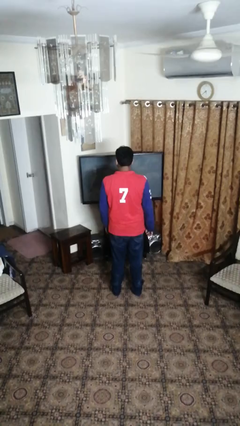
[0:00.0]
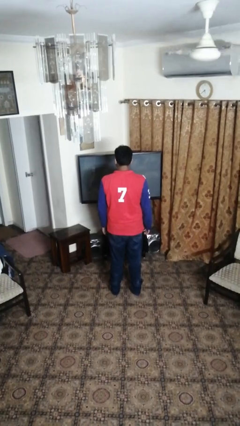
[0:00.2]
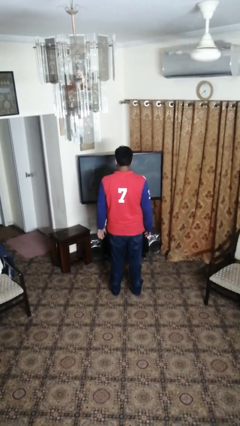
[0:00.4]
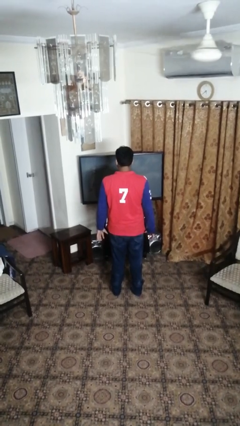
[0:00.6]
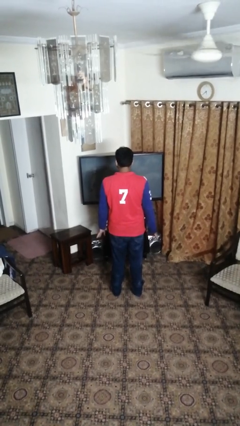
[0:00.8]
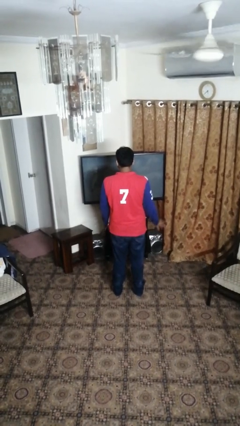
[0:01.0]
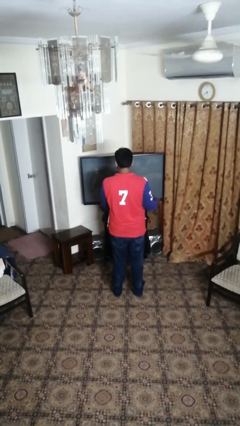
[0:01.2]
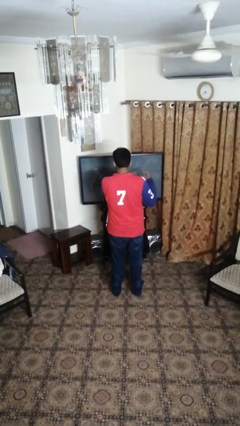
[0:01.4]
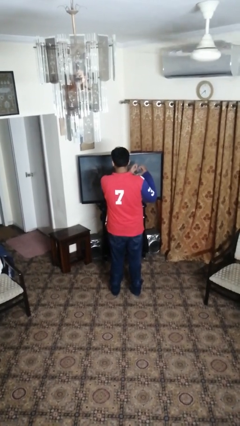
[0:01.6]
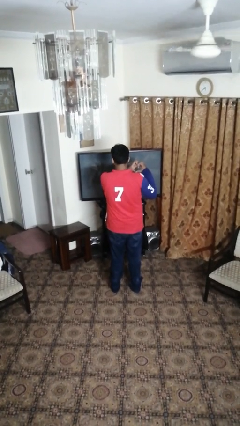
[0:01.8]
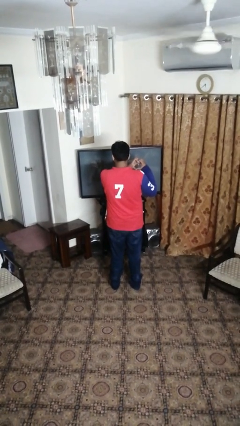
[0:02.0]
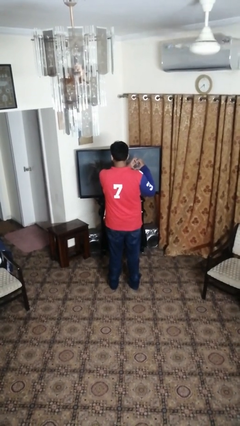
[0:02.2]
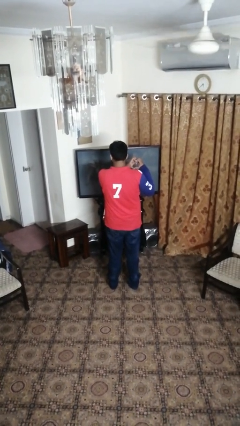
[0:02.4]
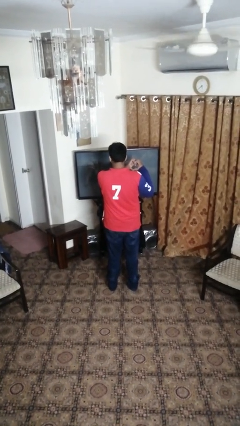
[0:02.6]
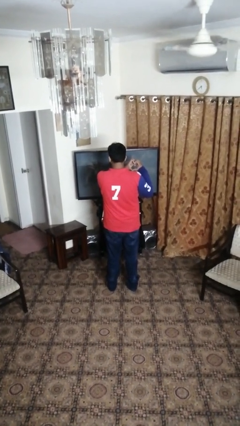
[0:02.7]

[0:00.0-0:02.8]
person gestures heart

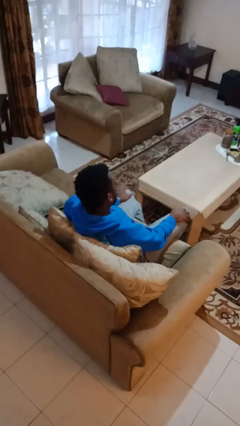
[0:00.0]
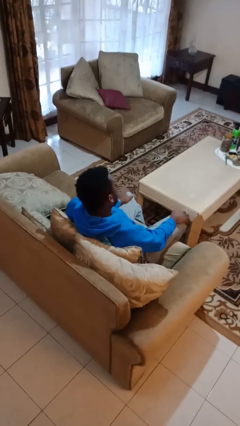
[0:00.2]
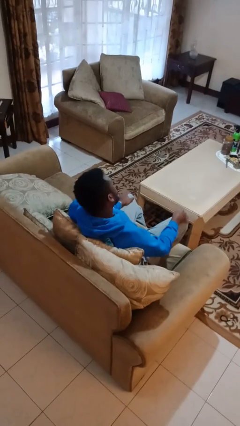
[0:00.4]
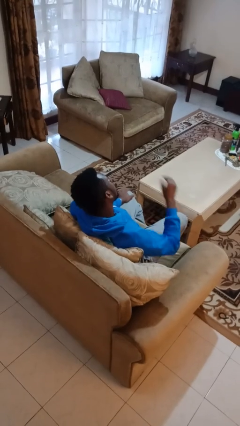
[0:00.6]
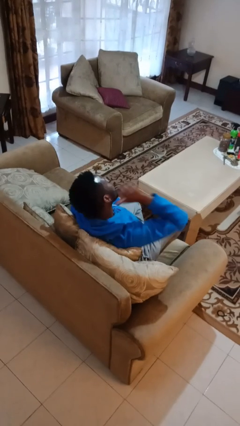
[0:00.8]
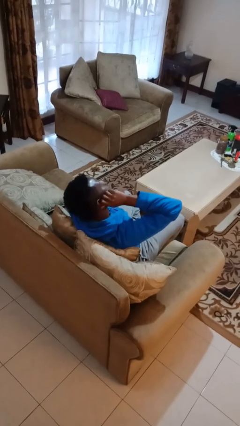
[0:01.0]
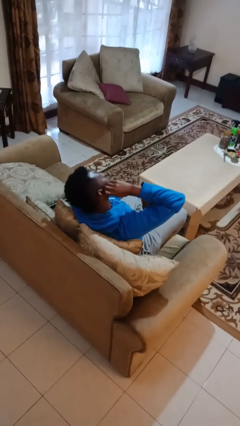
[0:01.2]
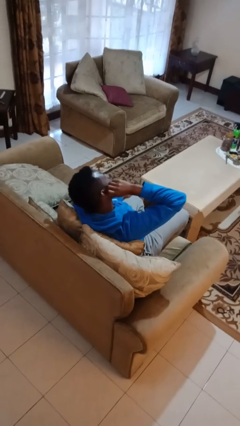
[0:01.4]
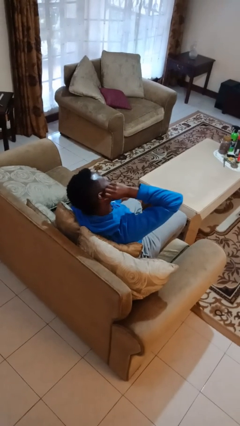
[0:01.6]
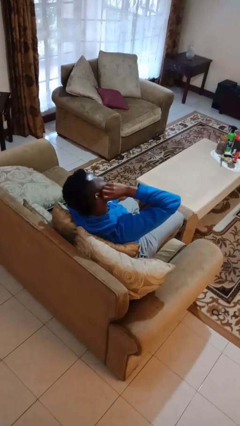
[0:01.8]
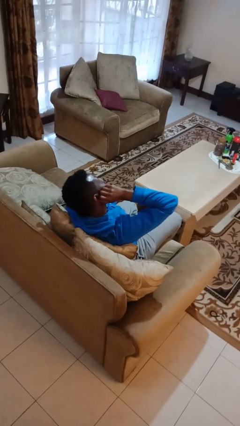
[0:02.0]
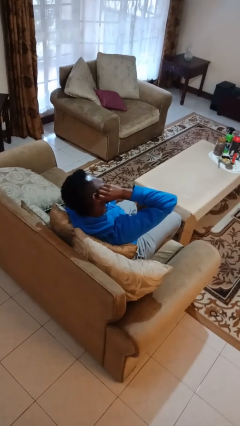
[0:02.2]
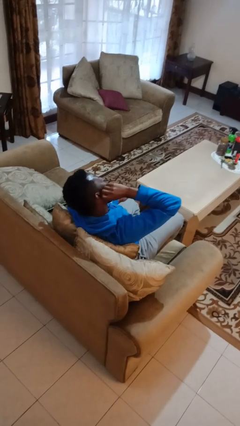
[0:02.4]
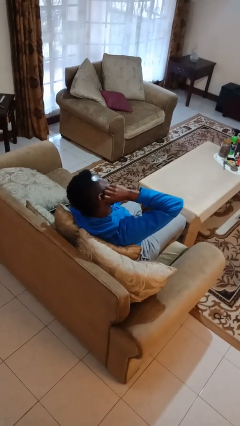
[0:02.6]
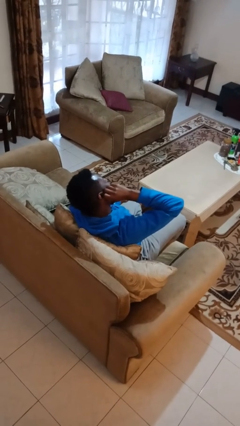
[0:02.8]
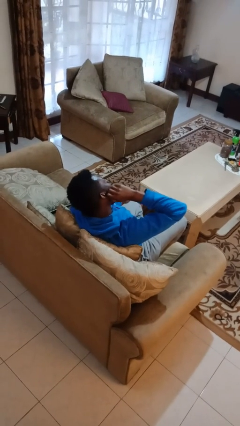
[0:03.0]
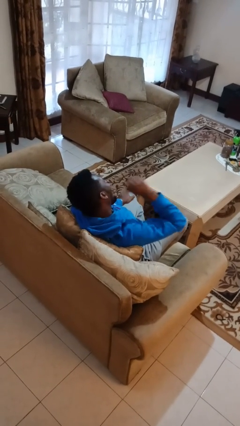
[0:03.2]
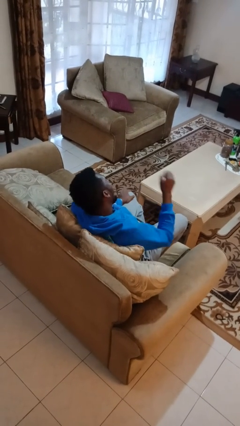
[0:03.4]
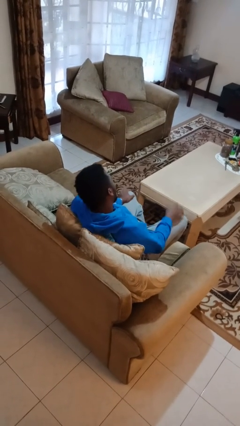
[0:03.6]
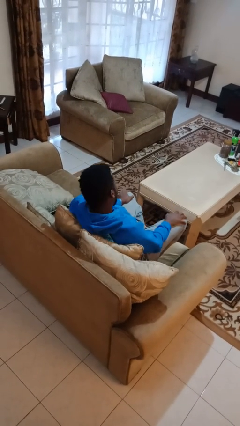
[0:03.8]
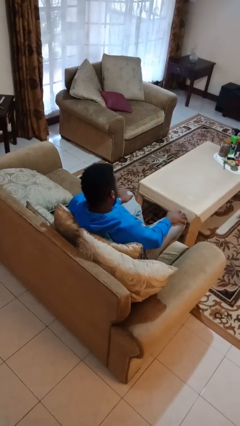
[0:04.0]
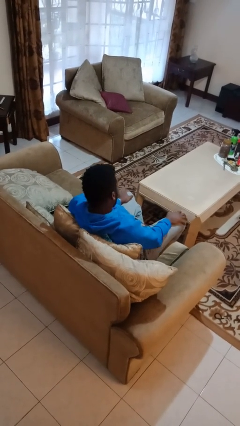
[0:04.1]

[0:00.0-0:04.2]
person touches earlobe

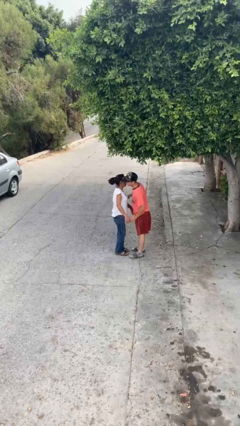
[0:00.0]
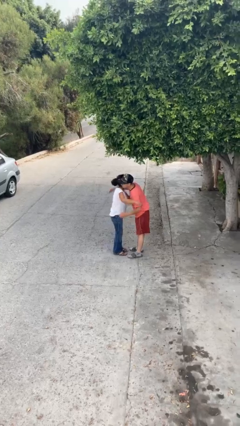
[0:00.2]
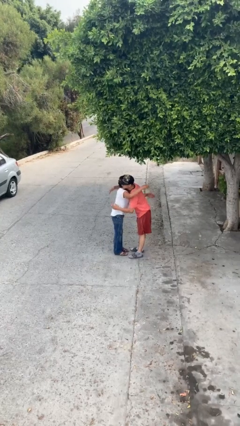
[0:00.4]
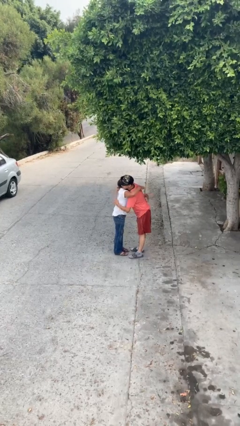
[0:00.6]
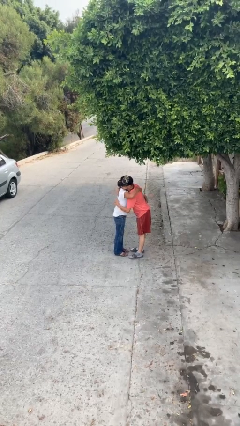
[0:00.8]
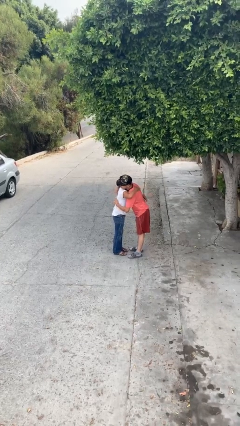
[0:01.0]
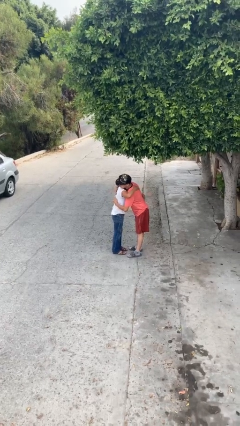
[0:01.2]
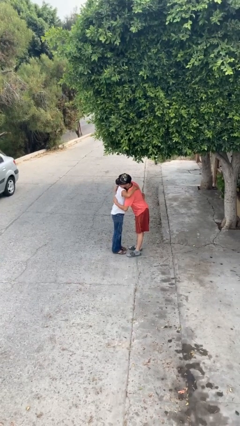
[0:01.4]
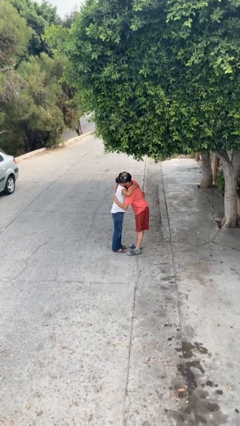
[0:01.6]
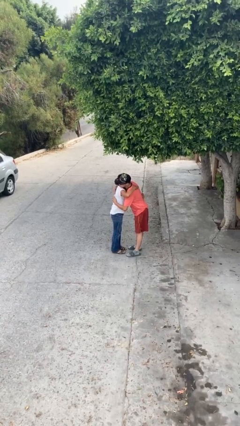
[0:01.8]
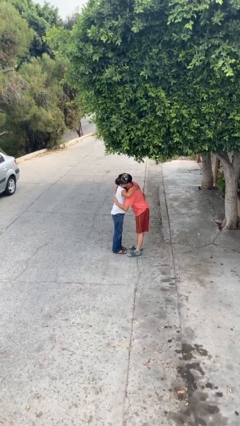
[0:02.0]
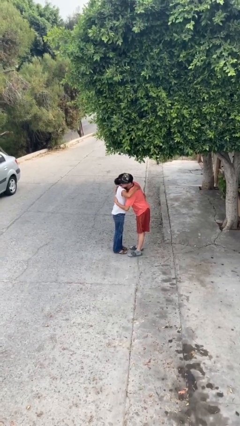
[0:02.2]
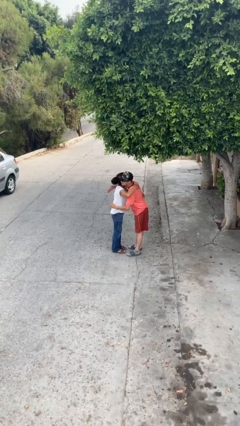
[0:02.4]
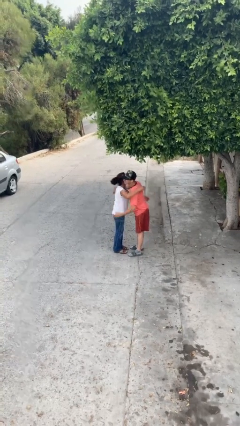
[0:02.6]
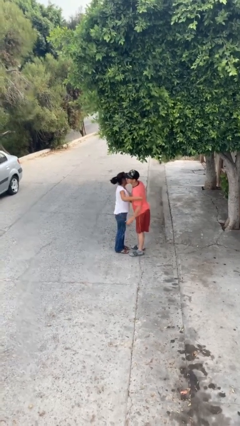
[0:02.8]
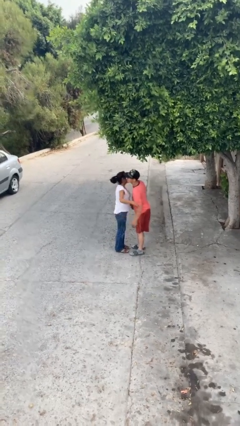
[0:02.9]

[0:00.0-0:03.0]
person embraces person

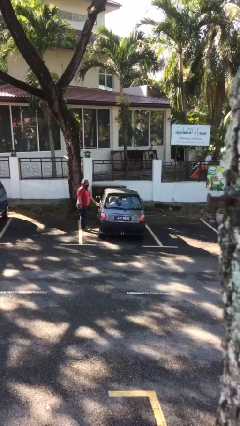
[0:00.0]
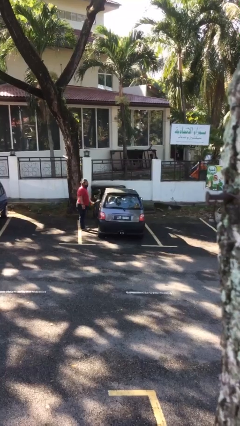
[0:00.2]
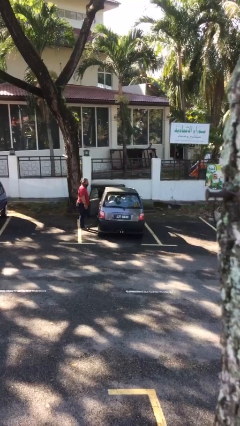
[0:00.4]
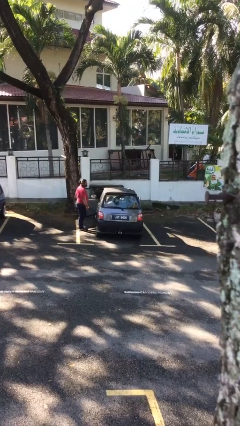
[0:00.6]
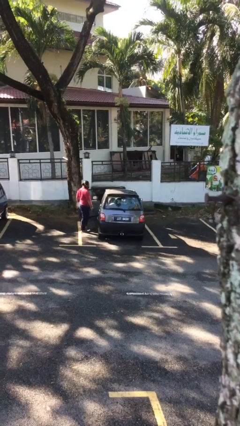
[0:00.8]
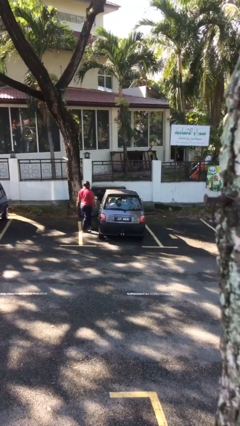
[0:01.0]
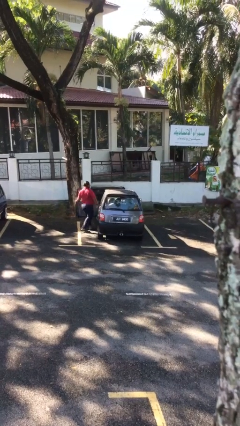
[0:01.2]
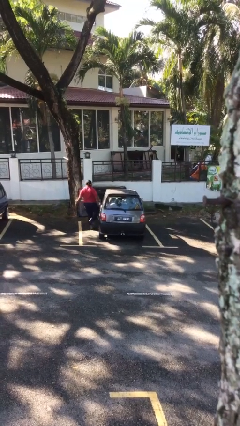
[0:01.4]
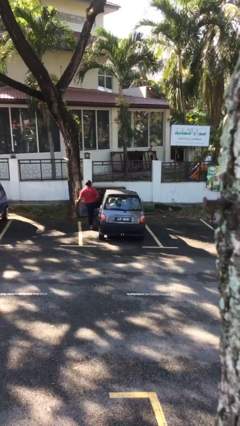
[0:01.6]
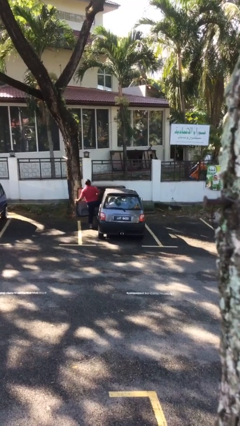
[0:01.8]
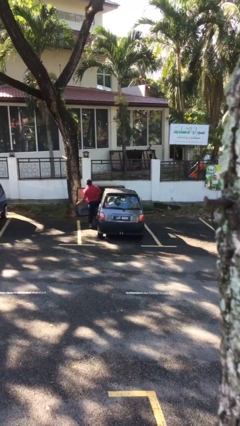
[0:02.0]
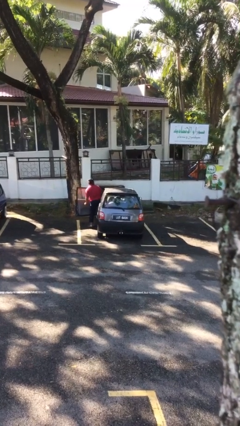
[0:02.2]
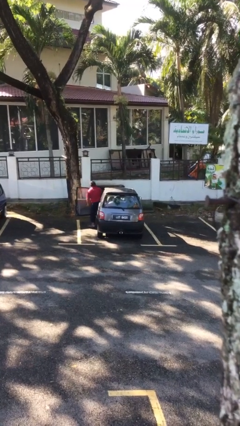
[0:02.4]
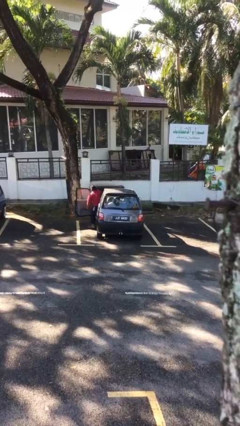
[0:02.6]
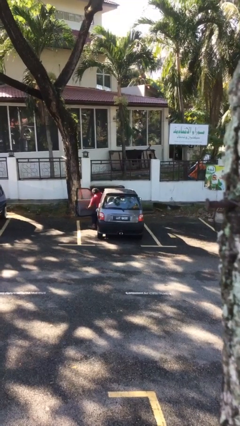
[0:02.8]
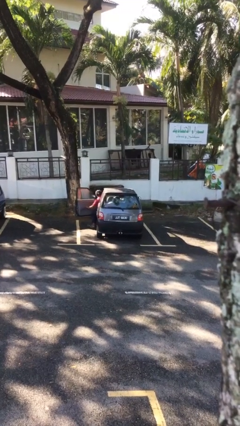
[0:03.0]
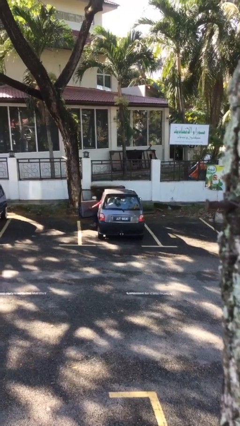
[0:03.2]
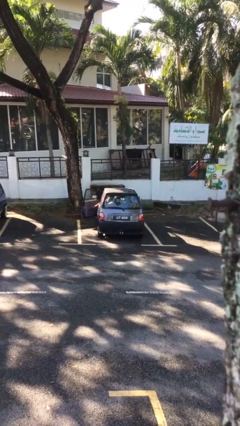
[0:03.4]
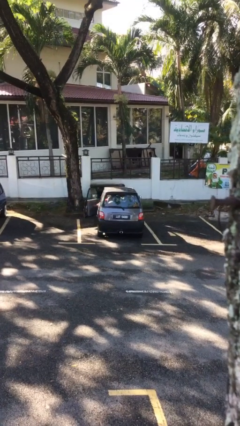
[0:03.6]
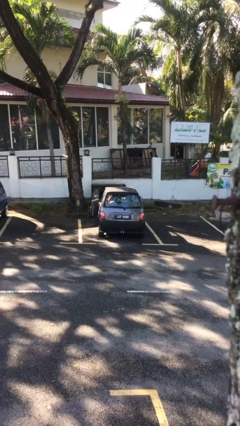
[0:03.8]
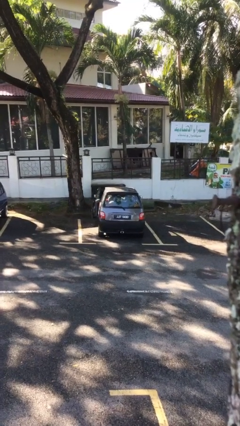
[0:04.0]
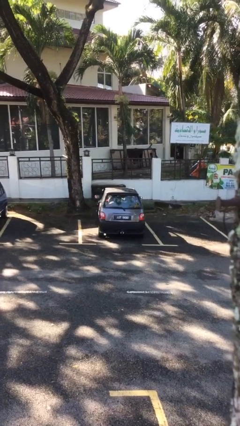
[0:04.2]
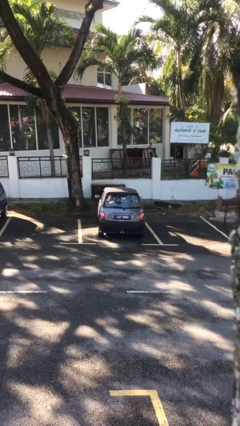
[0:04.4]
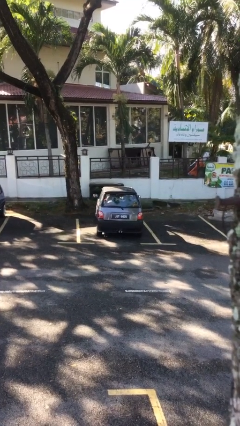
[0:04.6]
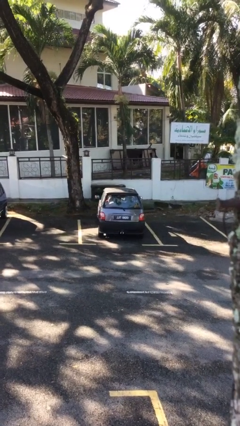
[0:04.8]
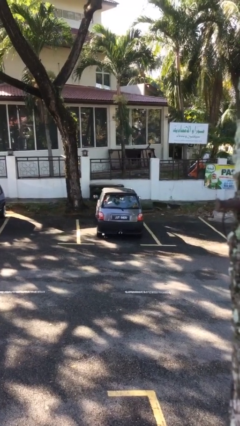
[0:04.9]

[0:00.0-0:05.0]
car picks up person

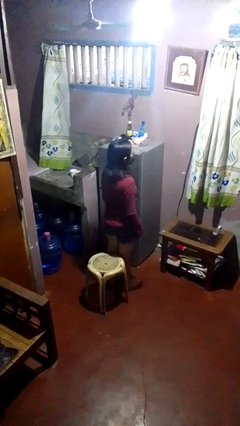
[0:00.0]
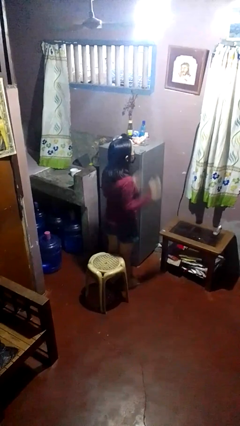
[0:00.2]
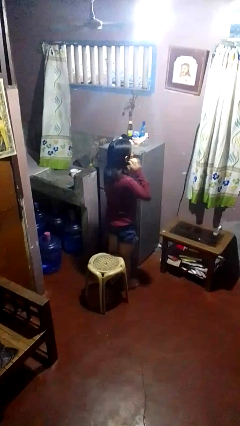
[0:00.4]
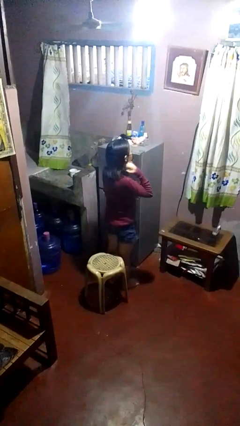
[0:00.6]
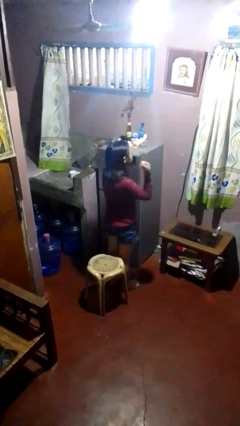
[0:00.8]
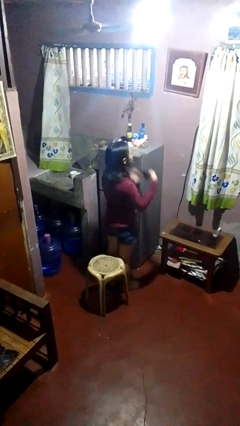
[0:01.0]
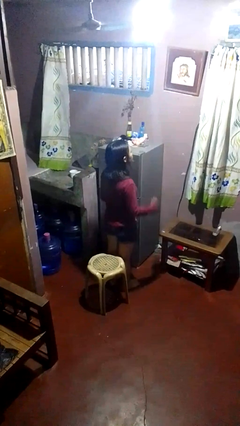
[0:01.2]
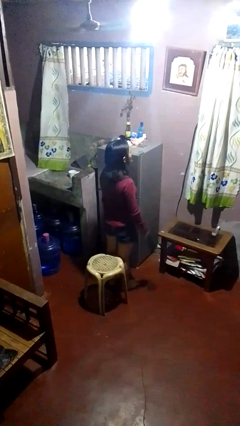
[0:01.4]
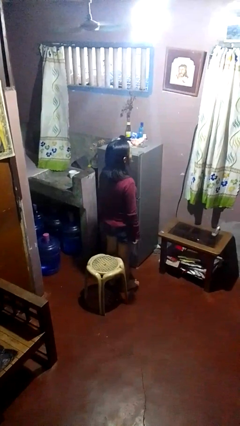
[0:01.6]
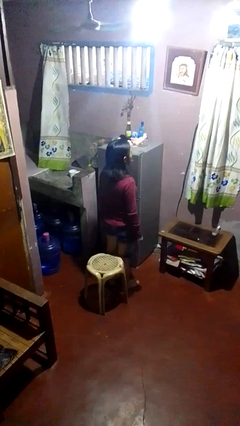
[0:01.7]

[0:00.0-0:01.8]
person takes off facemask

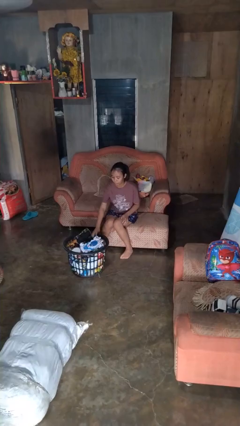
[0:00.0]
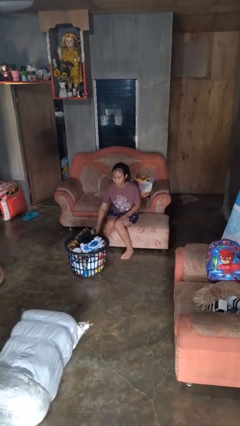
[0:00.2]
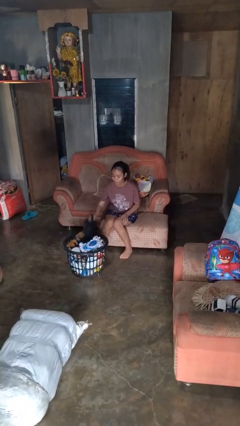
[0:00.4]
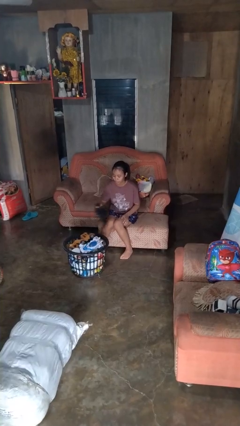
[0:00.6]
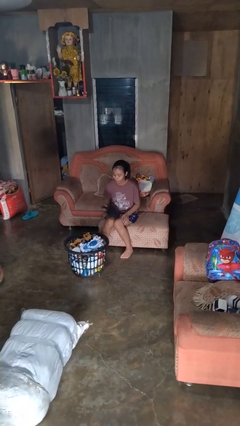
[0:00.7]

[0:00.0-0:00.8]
person takes object from basket
